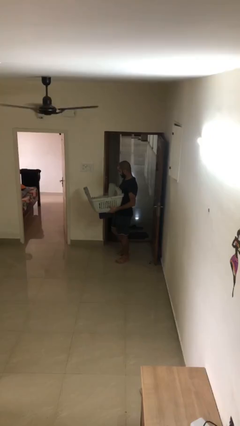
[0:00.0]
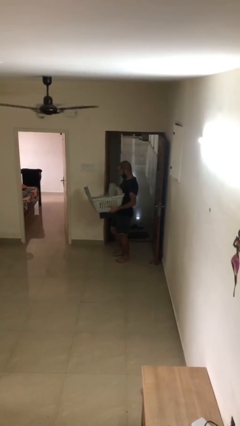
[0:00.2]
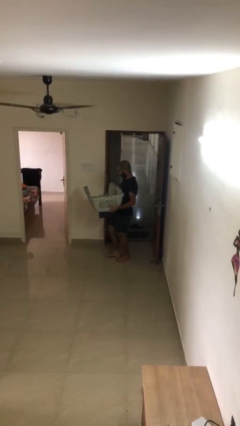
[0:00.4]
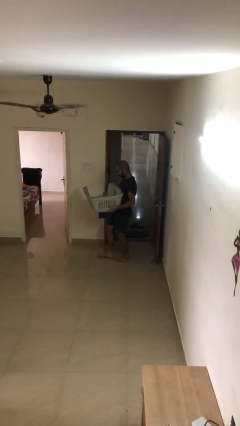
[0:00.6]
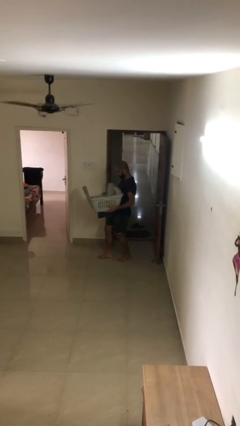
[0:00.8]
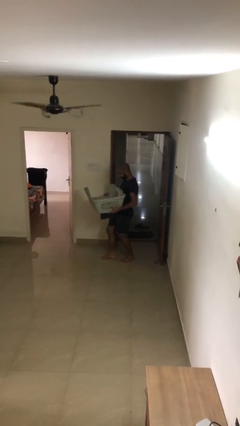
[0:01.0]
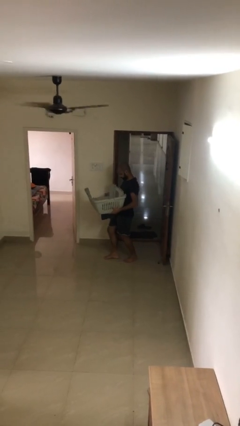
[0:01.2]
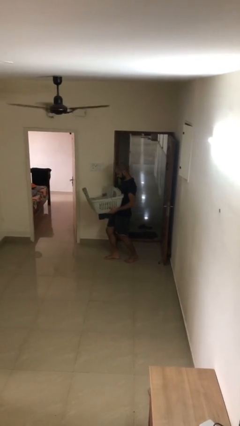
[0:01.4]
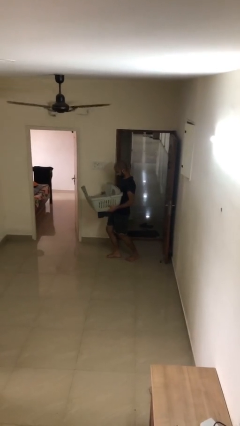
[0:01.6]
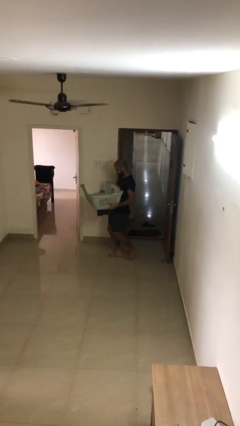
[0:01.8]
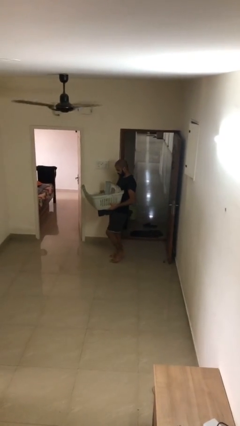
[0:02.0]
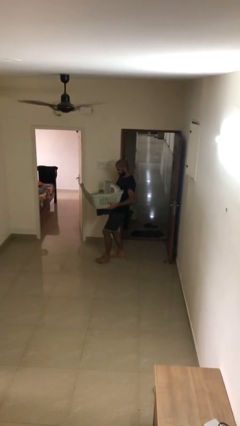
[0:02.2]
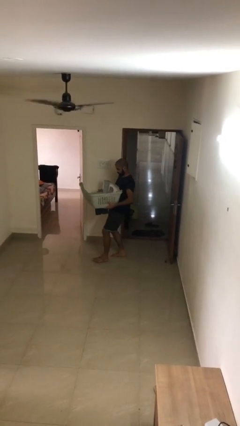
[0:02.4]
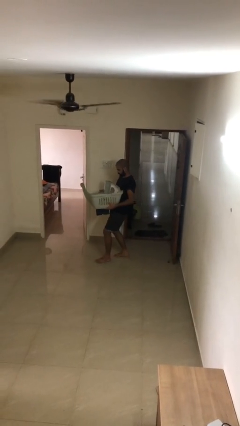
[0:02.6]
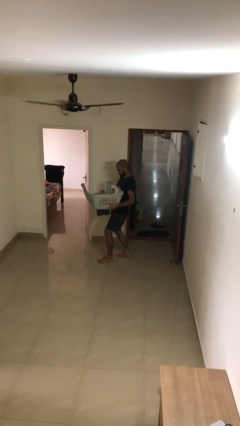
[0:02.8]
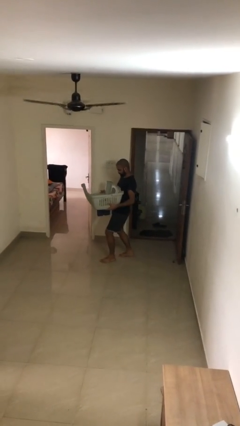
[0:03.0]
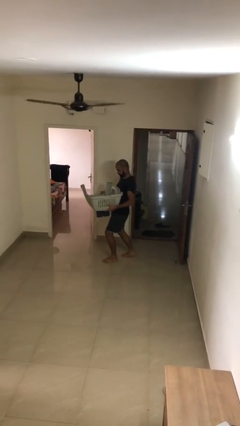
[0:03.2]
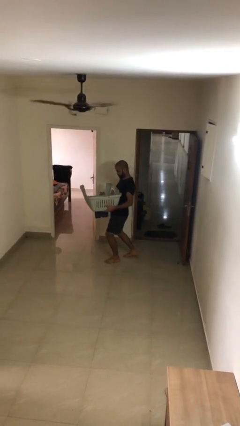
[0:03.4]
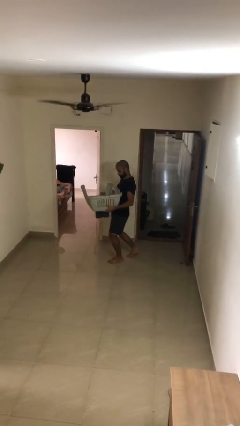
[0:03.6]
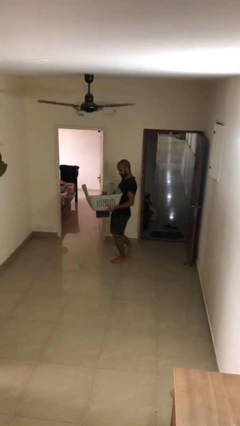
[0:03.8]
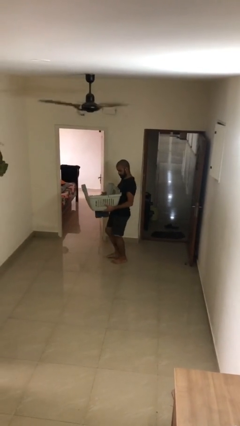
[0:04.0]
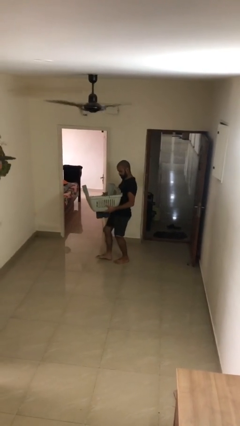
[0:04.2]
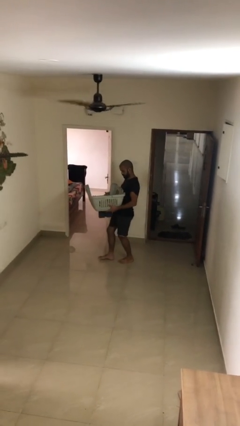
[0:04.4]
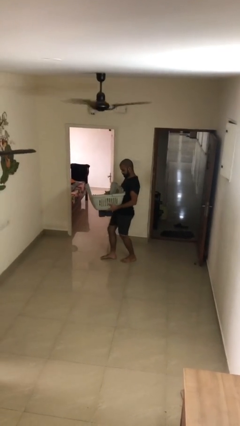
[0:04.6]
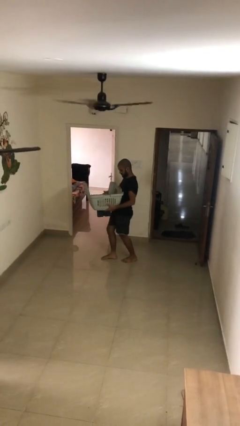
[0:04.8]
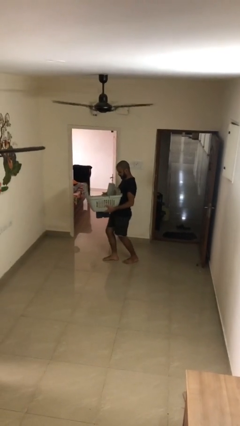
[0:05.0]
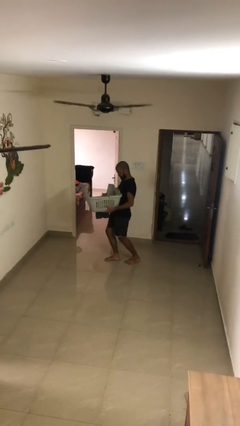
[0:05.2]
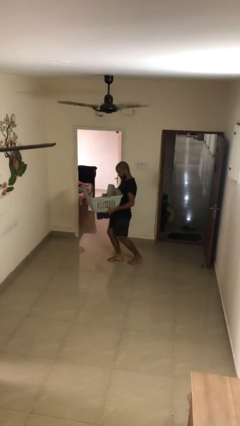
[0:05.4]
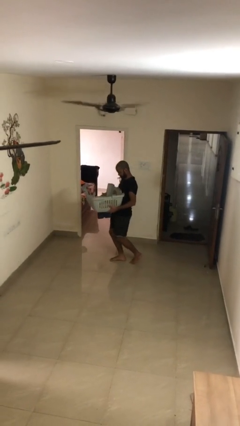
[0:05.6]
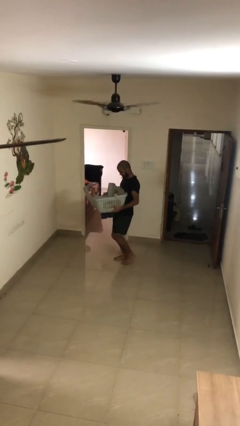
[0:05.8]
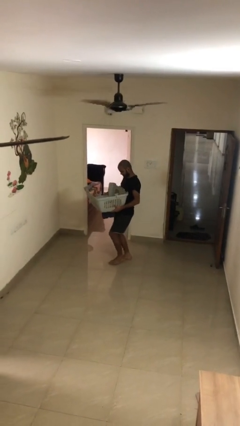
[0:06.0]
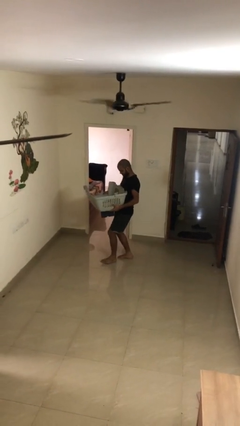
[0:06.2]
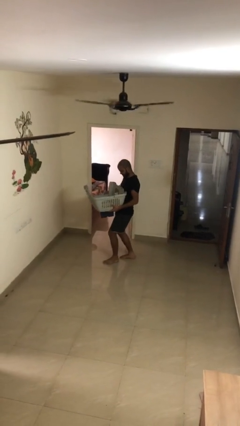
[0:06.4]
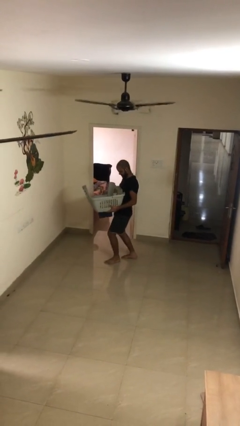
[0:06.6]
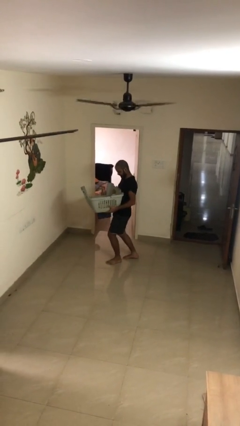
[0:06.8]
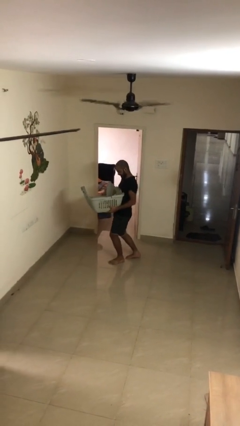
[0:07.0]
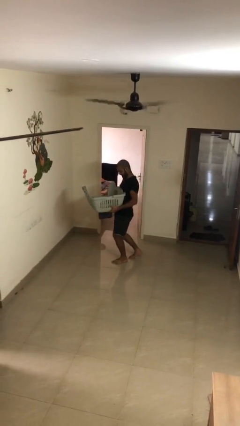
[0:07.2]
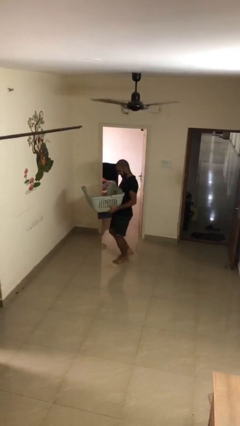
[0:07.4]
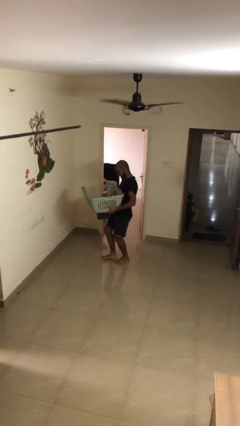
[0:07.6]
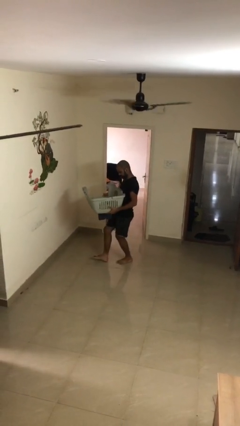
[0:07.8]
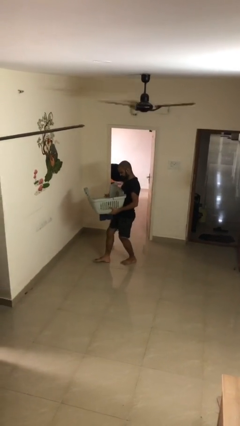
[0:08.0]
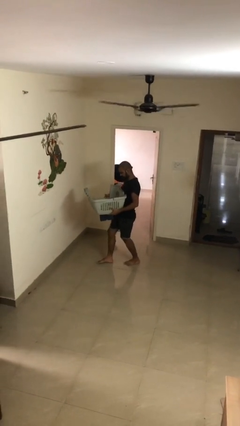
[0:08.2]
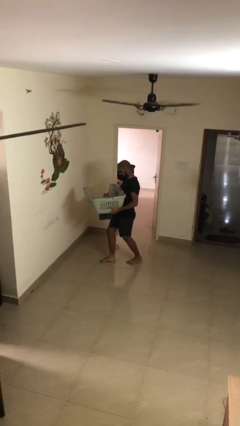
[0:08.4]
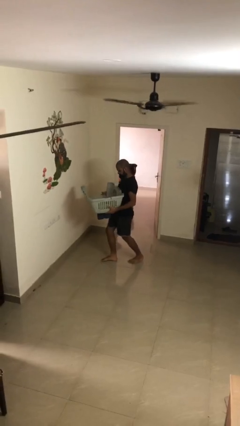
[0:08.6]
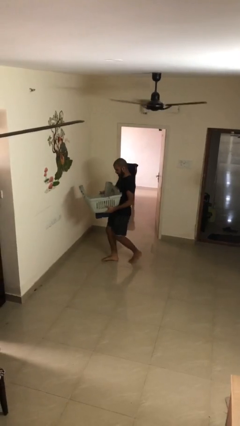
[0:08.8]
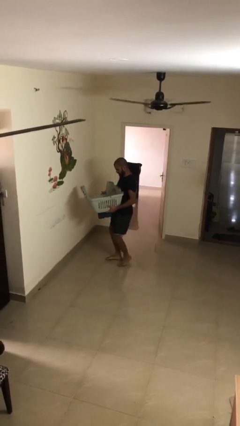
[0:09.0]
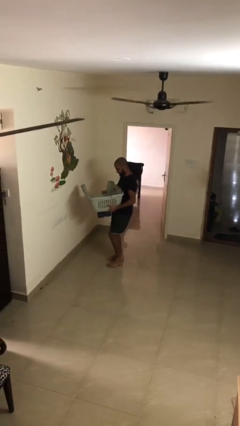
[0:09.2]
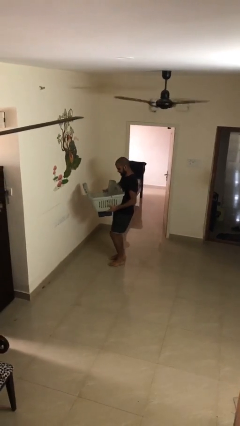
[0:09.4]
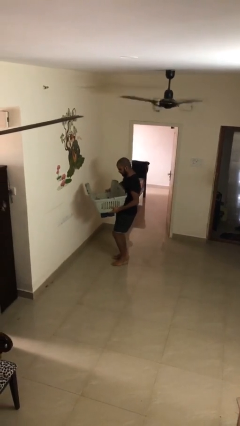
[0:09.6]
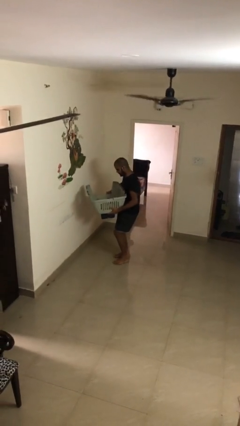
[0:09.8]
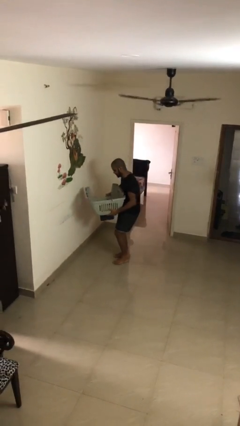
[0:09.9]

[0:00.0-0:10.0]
person carries heavy object

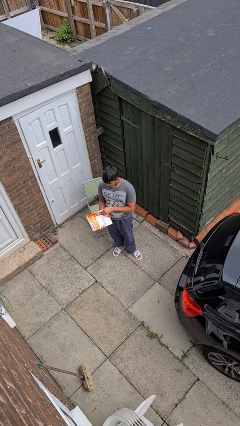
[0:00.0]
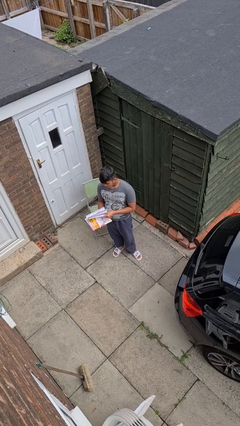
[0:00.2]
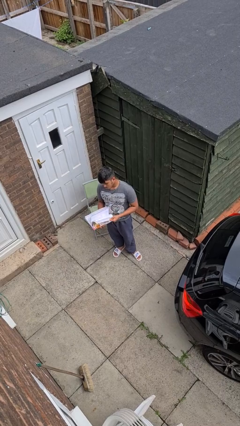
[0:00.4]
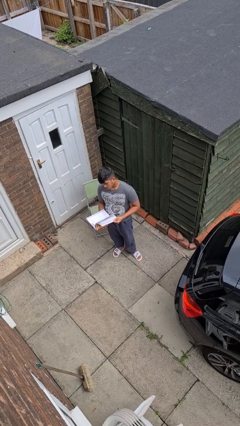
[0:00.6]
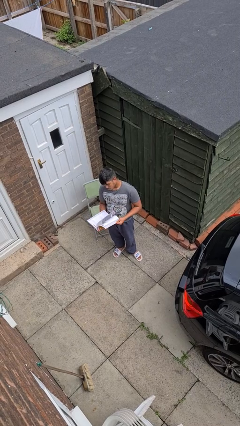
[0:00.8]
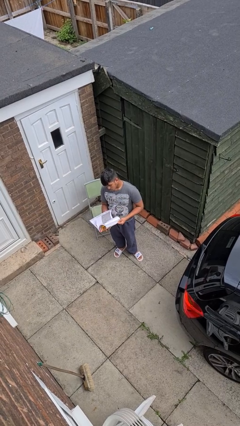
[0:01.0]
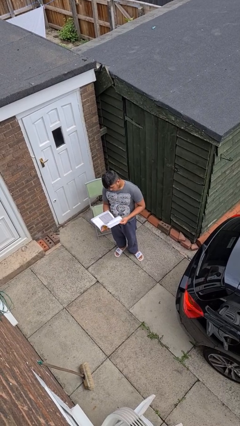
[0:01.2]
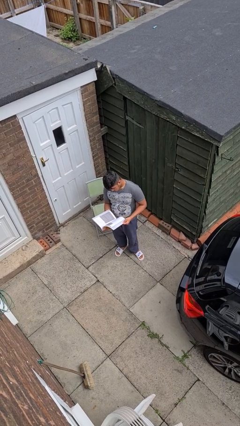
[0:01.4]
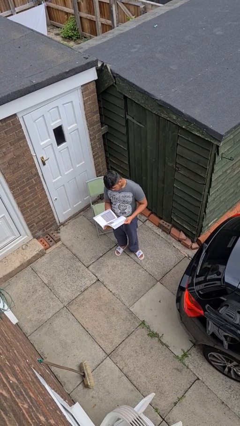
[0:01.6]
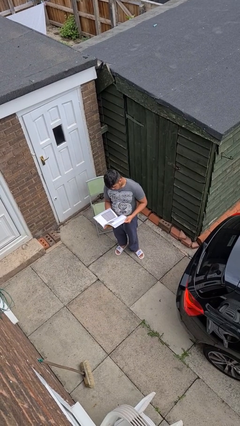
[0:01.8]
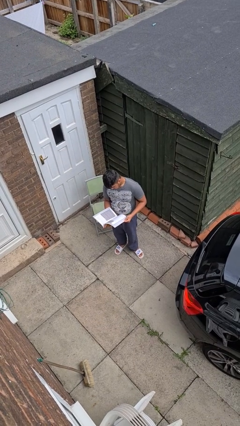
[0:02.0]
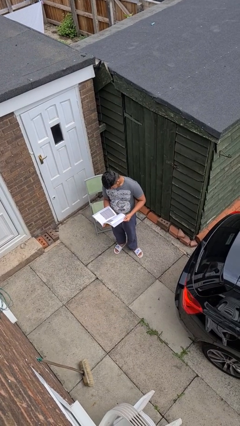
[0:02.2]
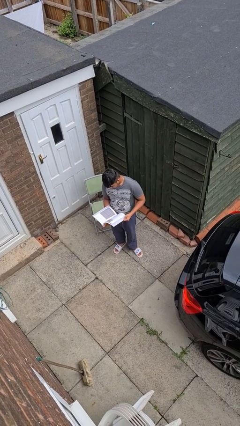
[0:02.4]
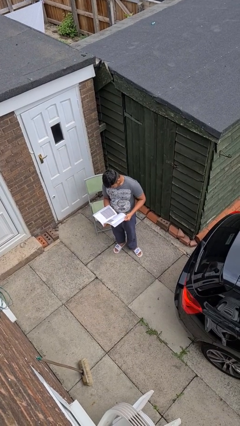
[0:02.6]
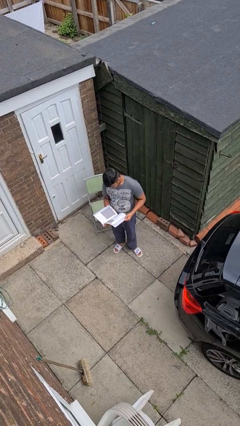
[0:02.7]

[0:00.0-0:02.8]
person reads book

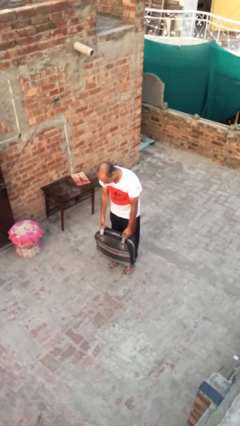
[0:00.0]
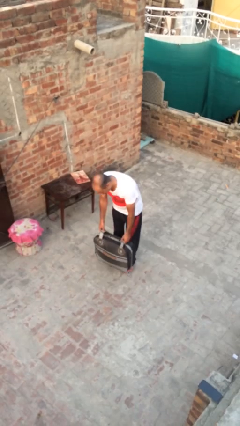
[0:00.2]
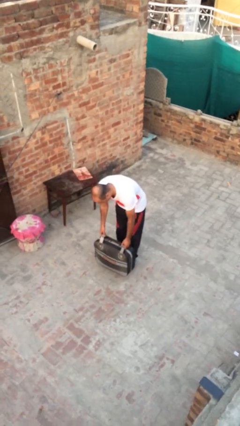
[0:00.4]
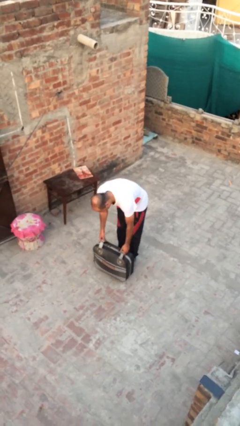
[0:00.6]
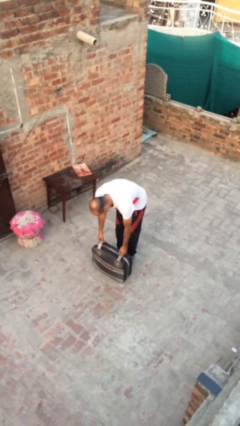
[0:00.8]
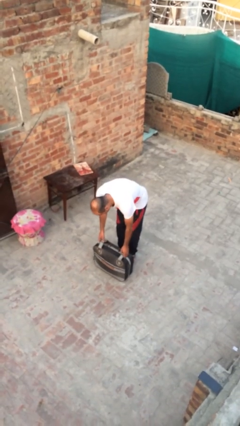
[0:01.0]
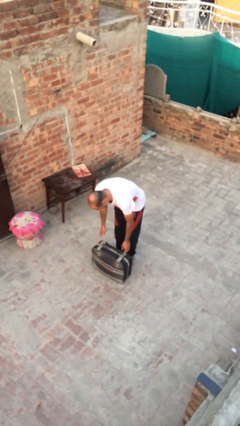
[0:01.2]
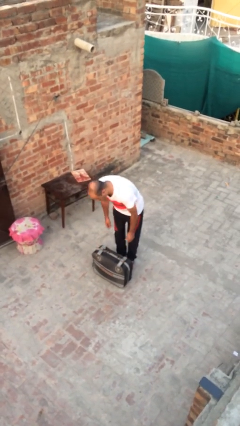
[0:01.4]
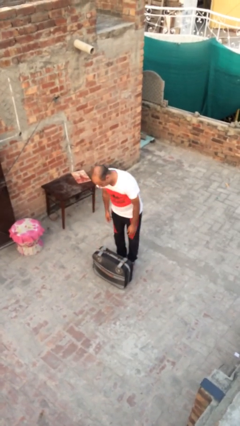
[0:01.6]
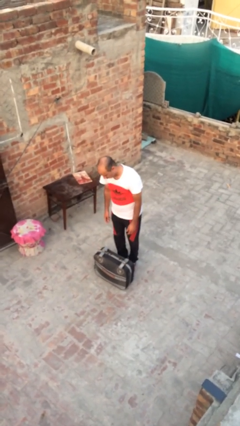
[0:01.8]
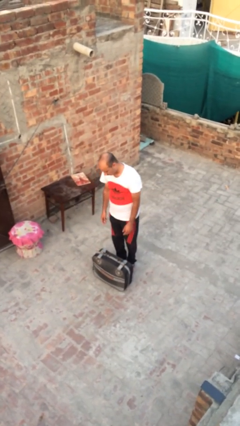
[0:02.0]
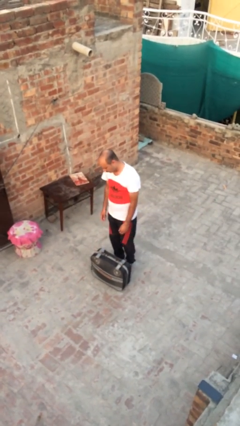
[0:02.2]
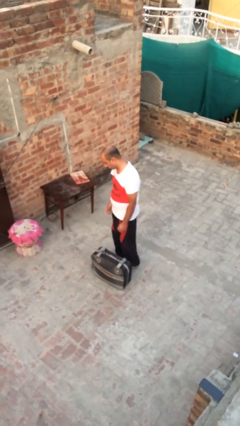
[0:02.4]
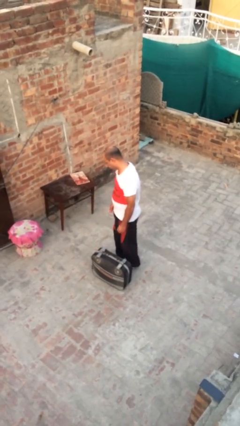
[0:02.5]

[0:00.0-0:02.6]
person puts down object on floor

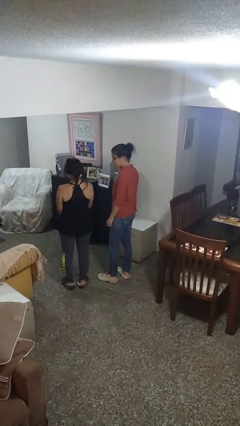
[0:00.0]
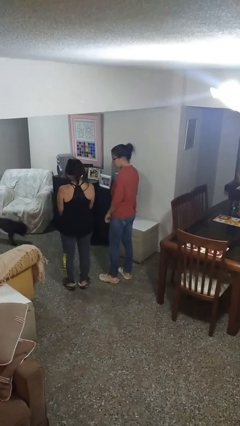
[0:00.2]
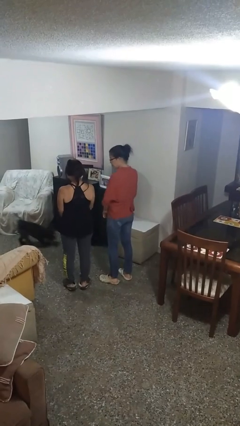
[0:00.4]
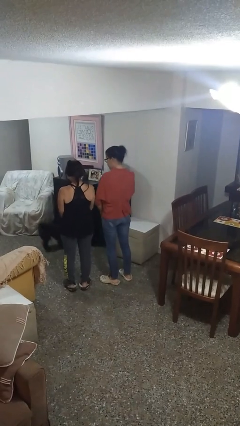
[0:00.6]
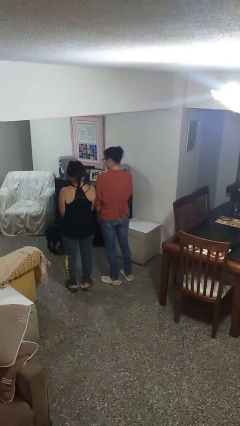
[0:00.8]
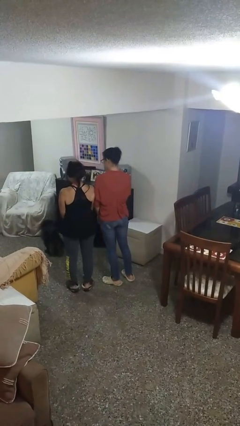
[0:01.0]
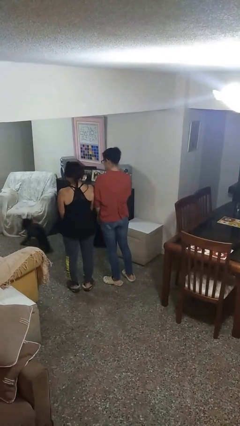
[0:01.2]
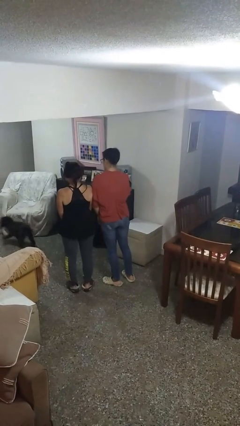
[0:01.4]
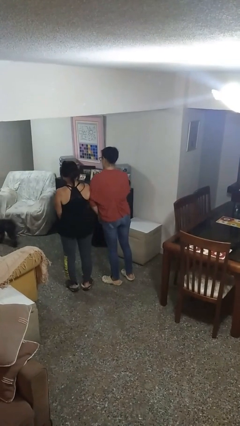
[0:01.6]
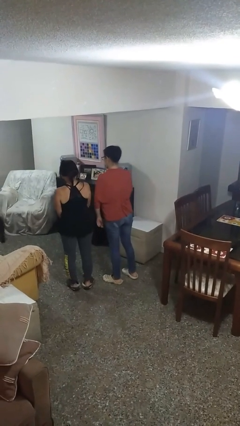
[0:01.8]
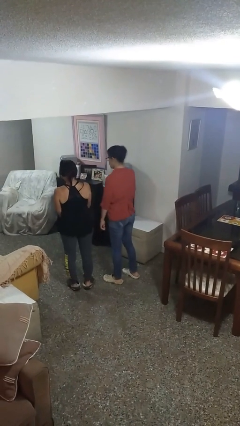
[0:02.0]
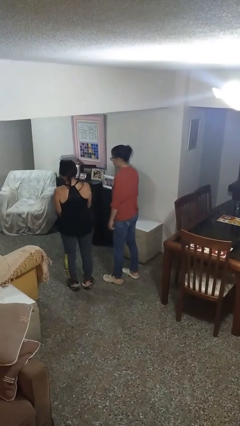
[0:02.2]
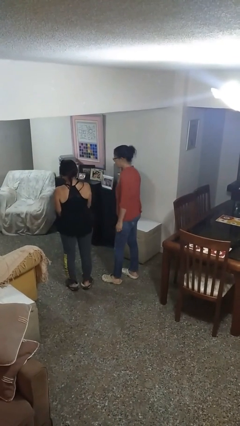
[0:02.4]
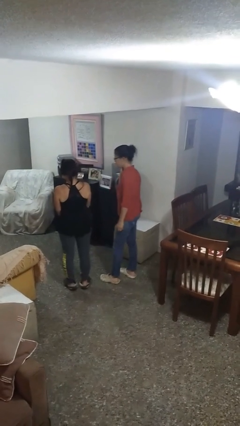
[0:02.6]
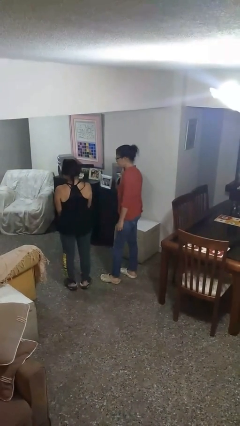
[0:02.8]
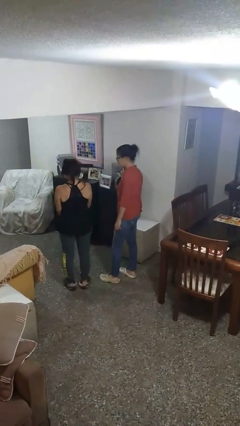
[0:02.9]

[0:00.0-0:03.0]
person nudges person with elbow
